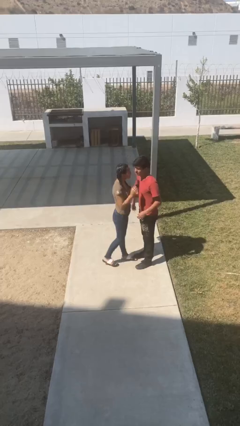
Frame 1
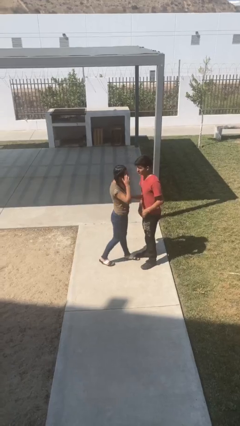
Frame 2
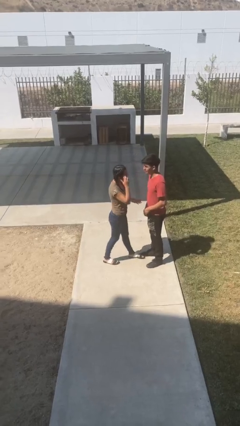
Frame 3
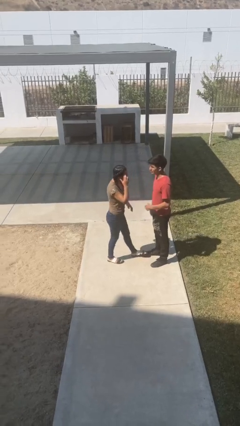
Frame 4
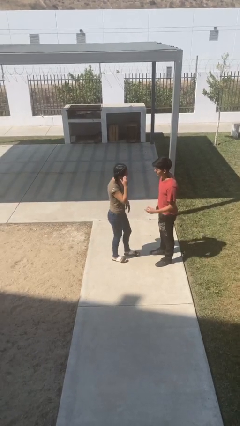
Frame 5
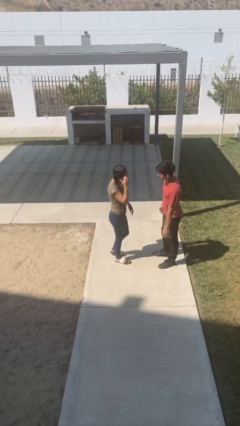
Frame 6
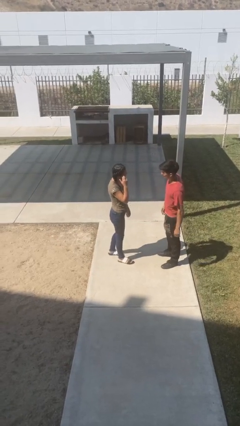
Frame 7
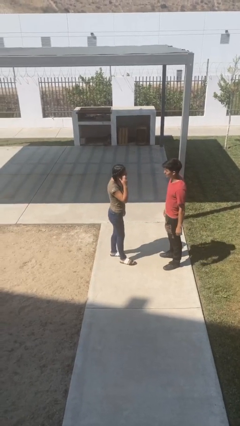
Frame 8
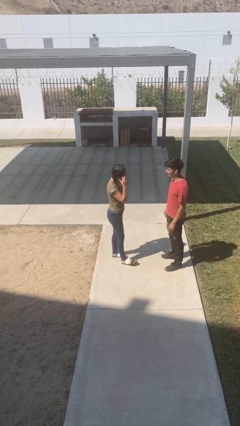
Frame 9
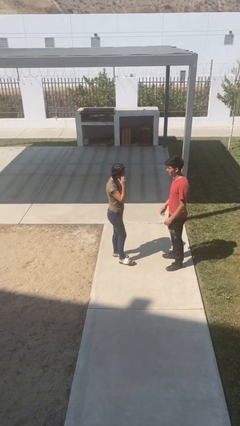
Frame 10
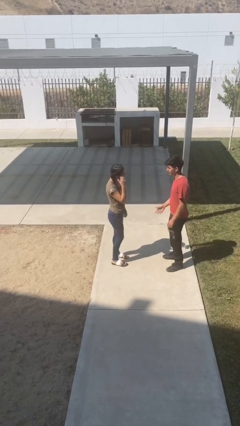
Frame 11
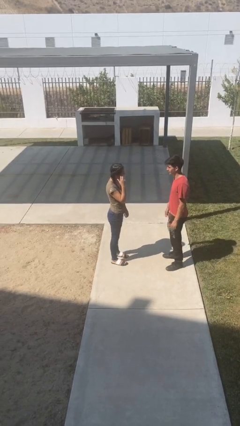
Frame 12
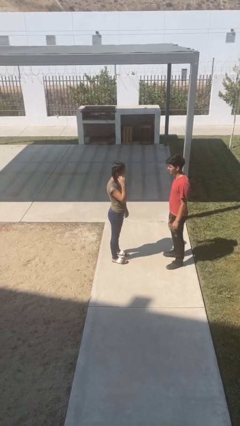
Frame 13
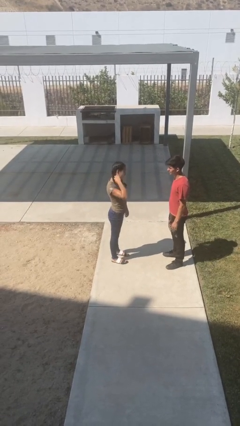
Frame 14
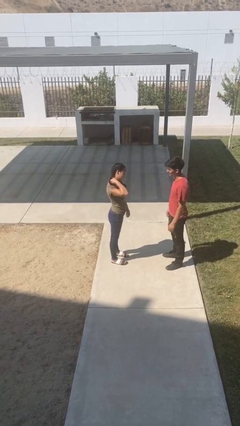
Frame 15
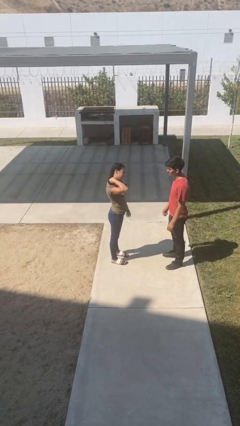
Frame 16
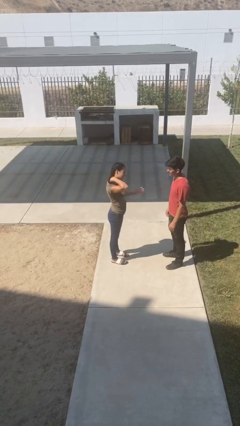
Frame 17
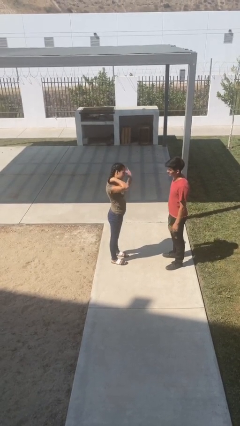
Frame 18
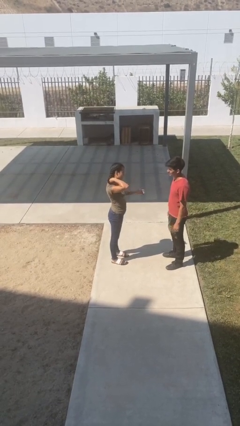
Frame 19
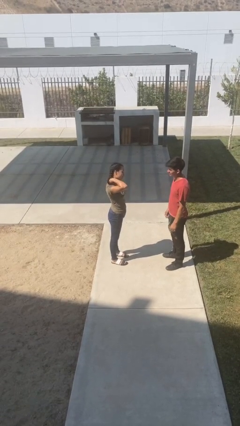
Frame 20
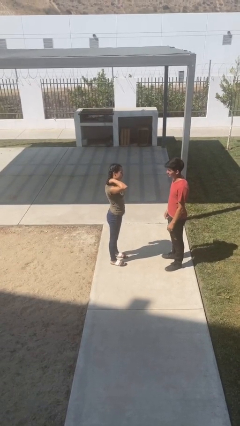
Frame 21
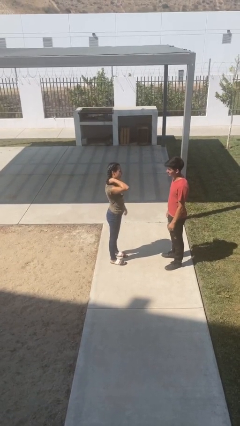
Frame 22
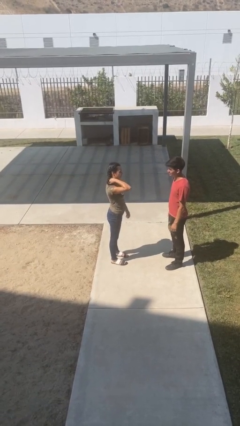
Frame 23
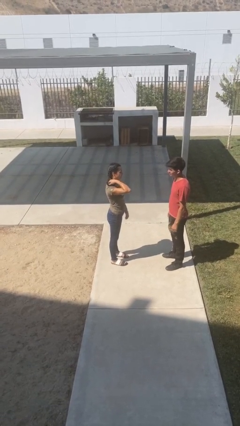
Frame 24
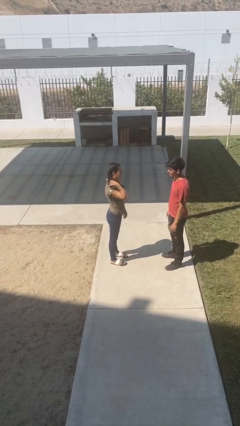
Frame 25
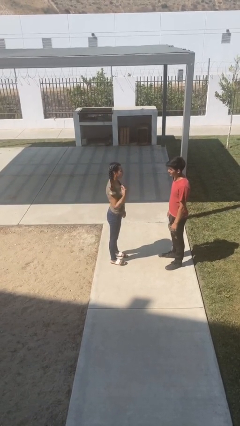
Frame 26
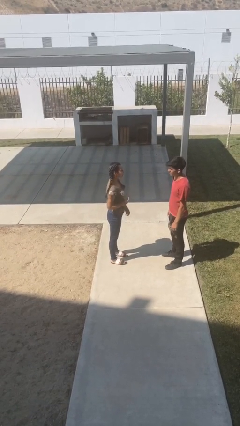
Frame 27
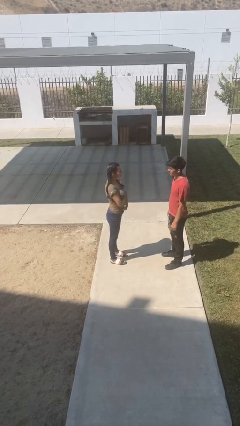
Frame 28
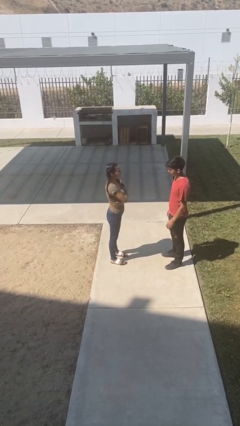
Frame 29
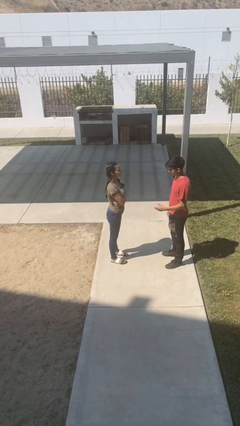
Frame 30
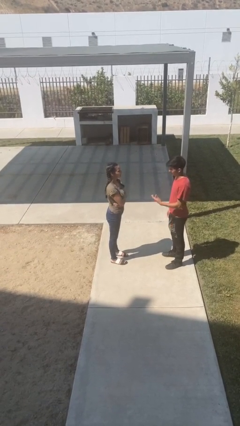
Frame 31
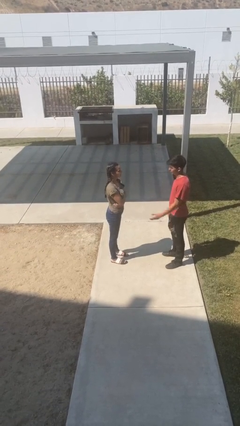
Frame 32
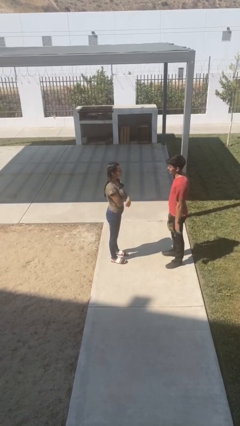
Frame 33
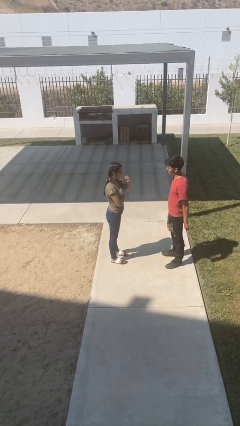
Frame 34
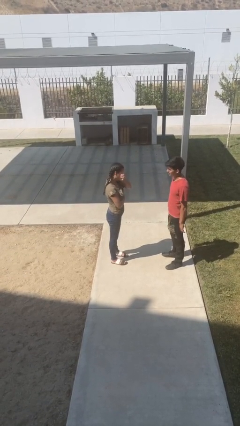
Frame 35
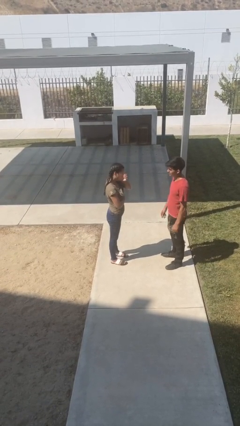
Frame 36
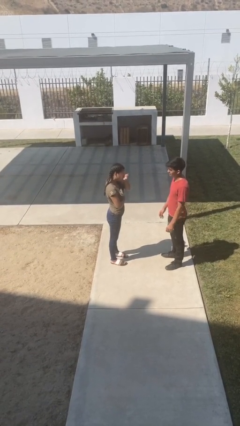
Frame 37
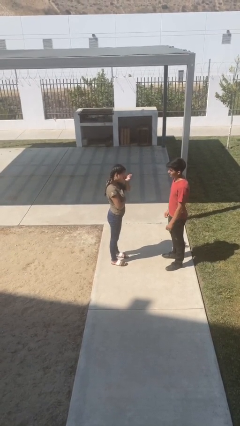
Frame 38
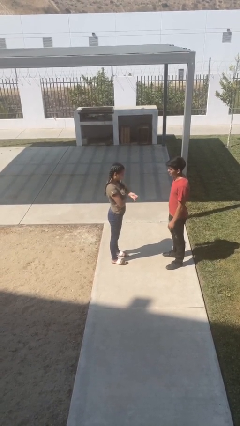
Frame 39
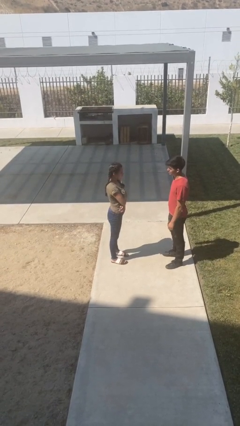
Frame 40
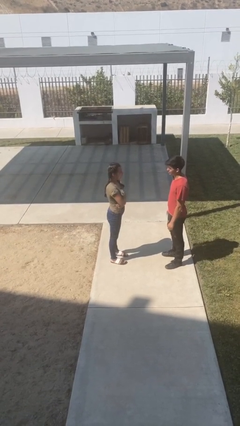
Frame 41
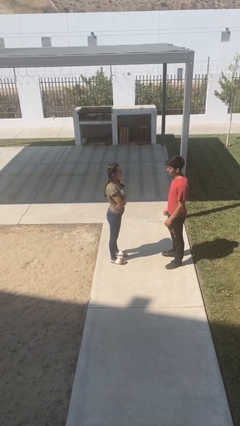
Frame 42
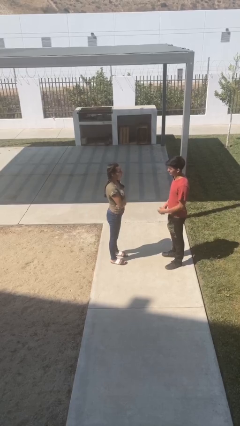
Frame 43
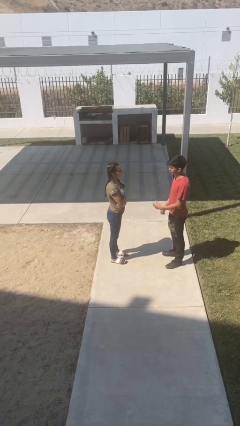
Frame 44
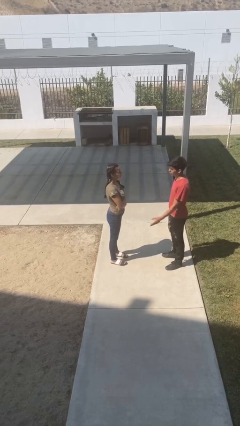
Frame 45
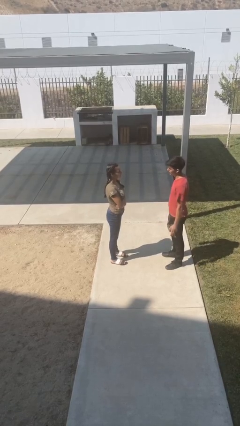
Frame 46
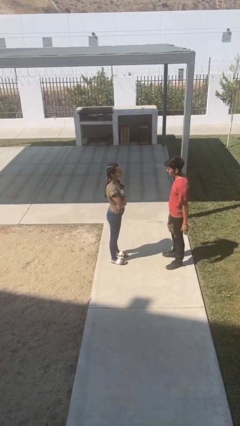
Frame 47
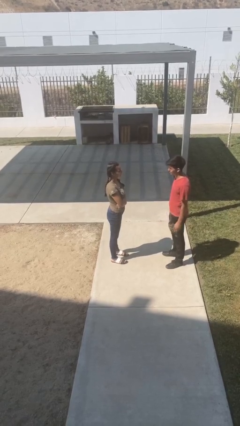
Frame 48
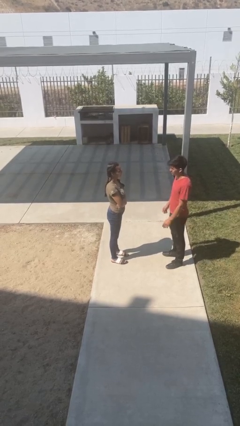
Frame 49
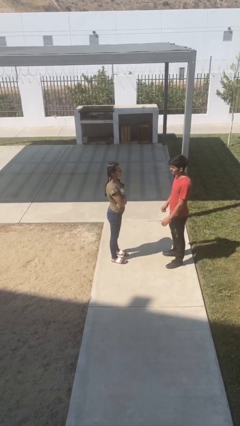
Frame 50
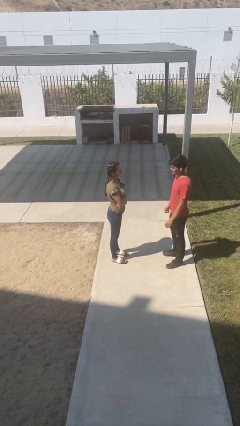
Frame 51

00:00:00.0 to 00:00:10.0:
person talks to person

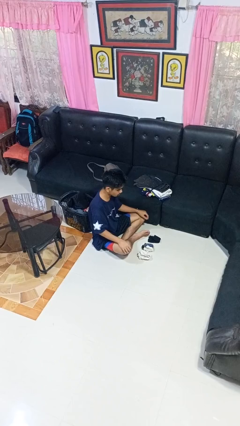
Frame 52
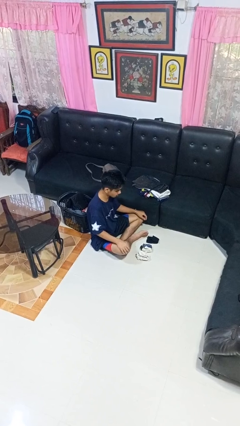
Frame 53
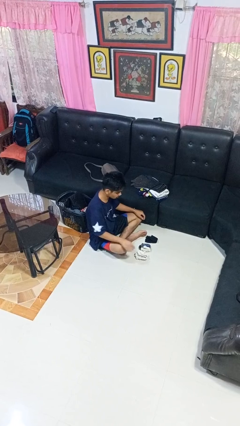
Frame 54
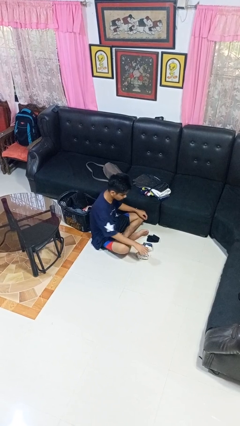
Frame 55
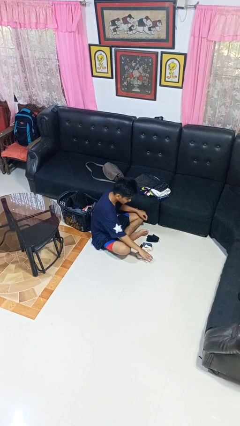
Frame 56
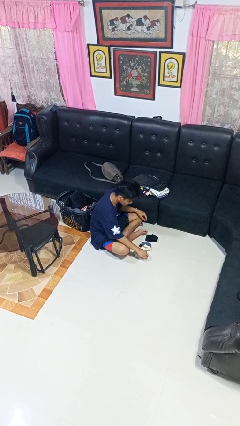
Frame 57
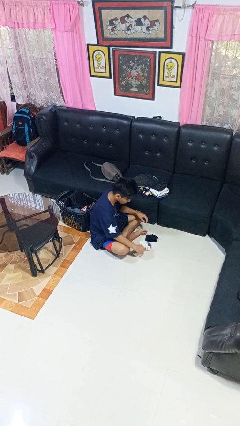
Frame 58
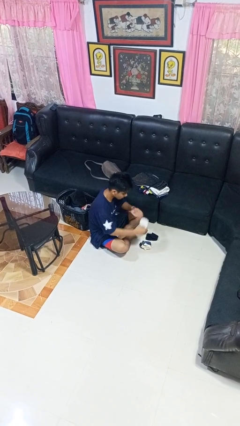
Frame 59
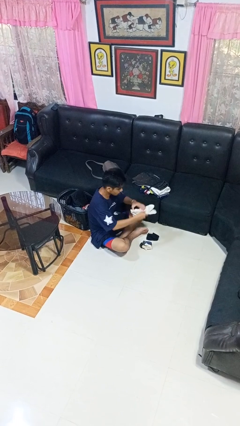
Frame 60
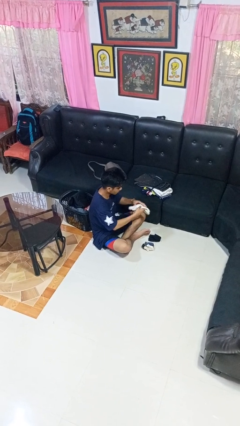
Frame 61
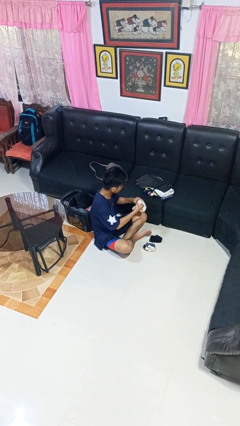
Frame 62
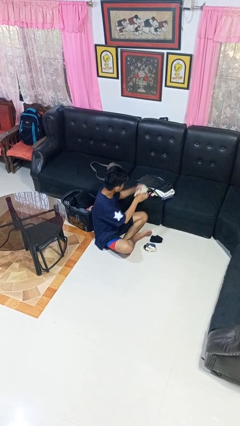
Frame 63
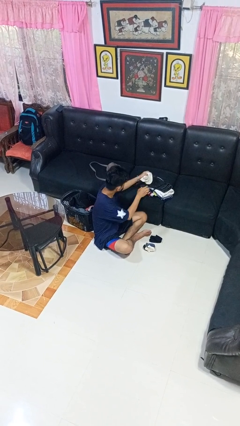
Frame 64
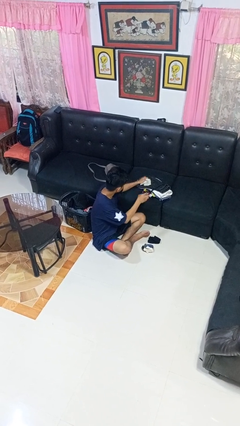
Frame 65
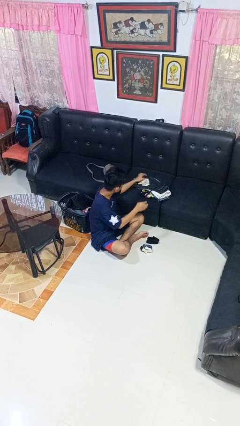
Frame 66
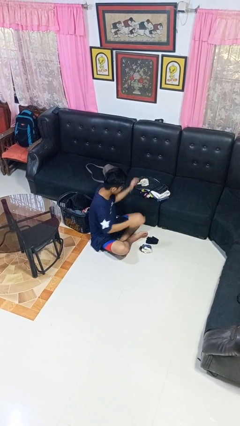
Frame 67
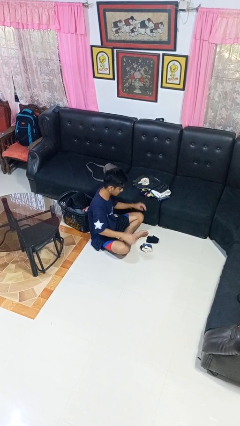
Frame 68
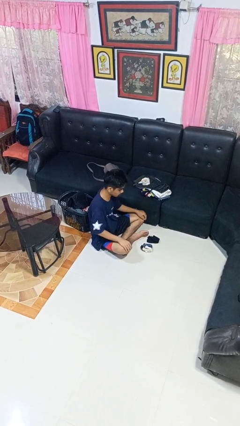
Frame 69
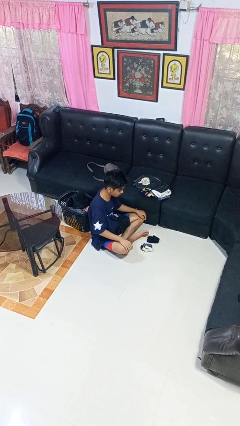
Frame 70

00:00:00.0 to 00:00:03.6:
person folds socks

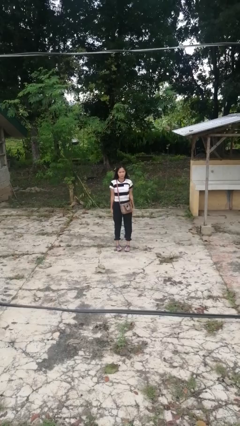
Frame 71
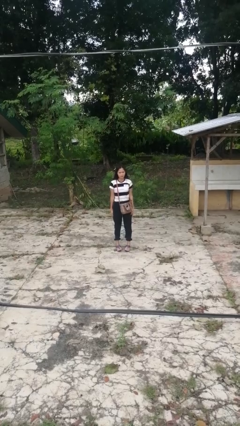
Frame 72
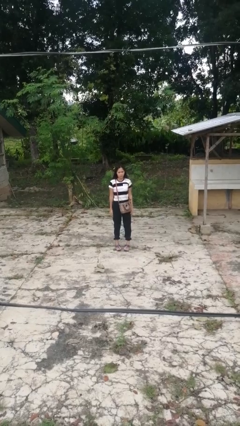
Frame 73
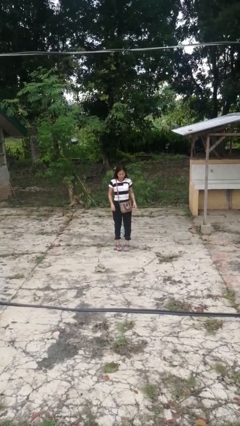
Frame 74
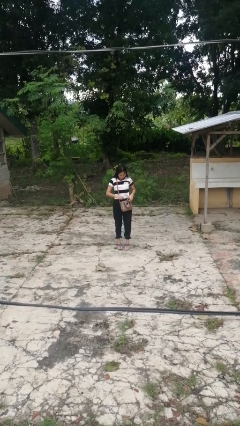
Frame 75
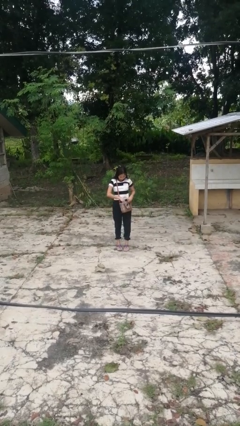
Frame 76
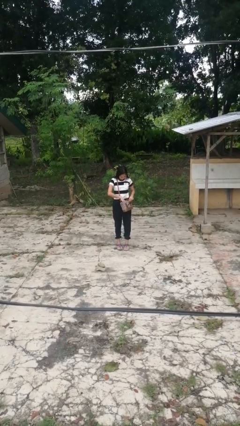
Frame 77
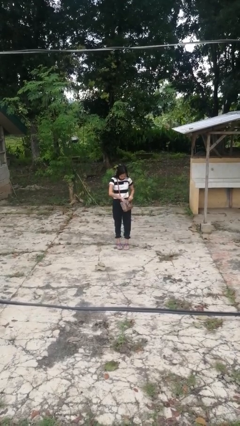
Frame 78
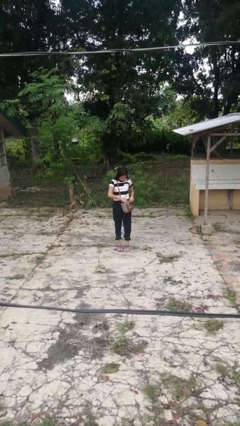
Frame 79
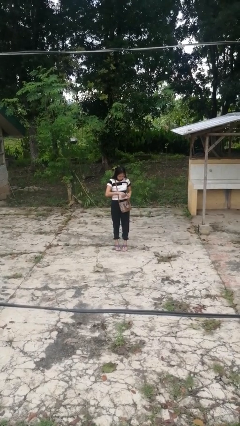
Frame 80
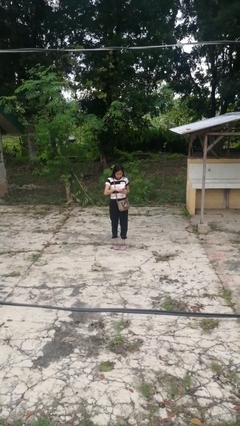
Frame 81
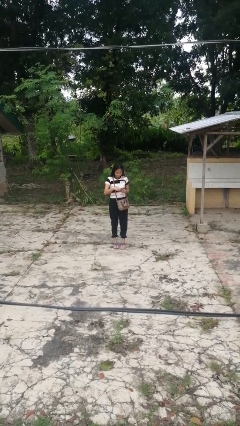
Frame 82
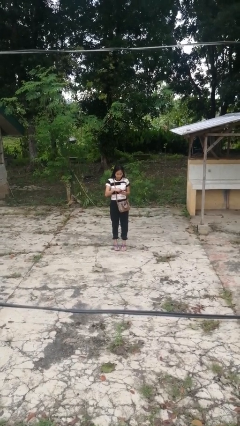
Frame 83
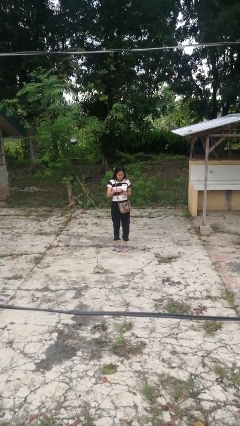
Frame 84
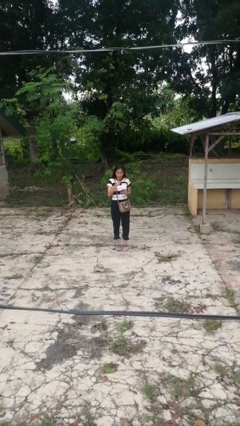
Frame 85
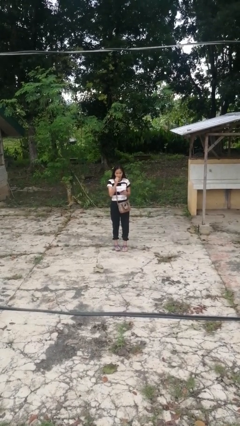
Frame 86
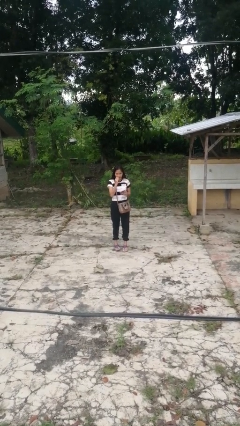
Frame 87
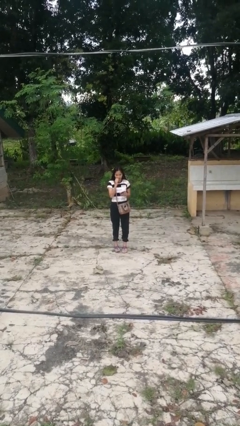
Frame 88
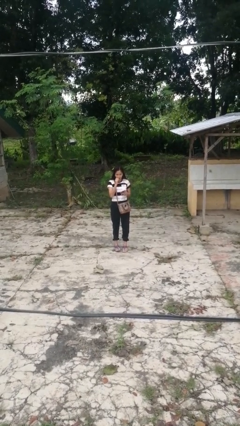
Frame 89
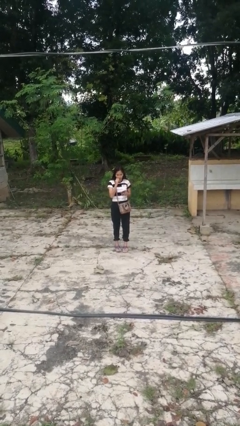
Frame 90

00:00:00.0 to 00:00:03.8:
person eats snack from bag

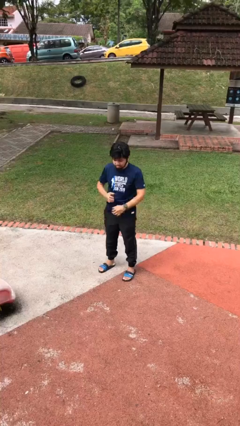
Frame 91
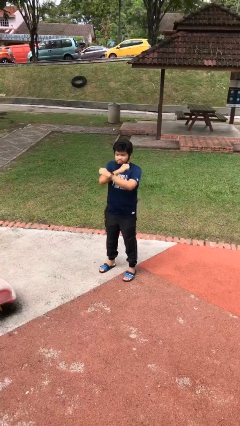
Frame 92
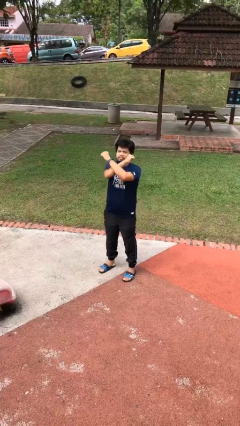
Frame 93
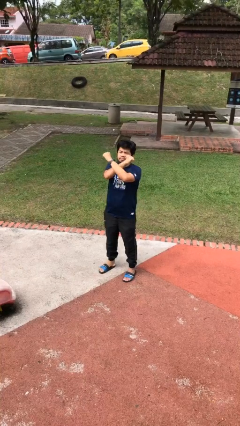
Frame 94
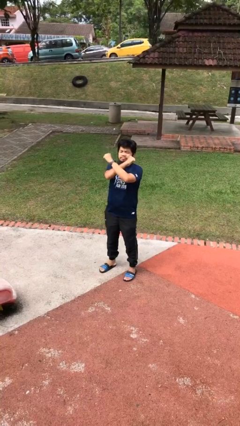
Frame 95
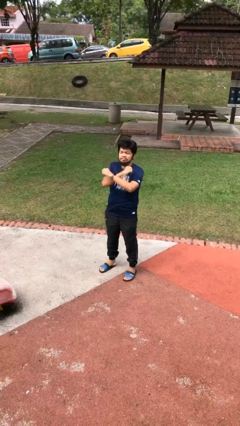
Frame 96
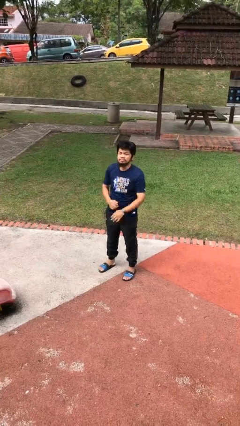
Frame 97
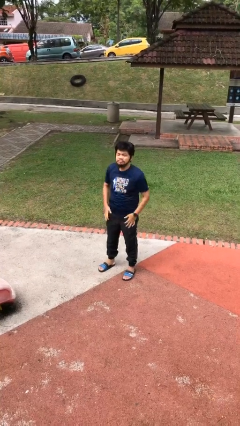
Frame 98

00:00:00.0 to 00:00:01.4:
person gestures arms x
